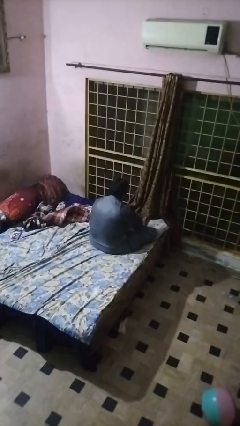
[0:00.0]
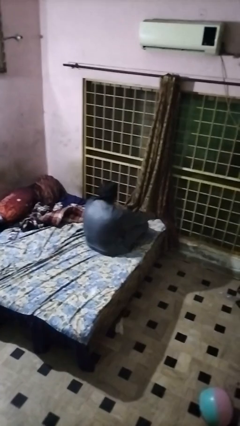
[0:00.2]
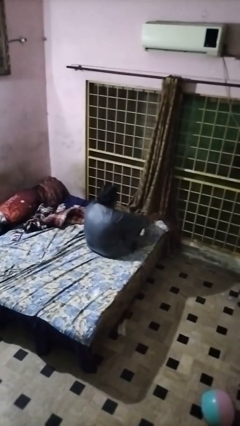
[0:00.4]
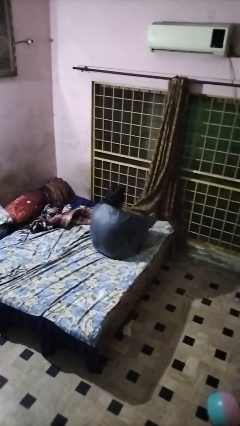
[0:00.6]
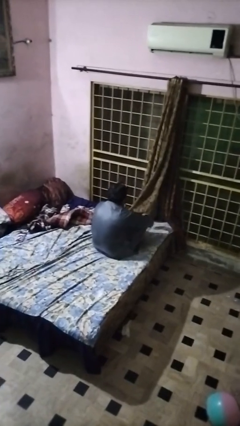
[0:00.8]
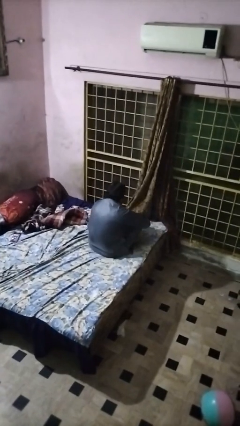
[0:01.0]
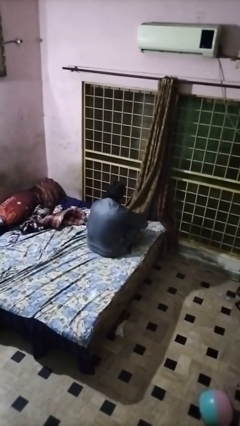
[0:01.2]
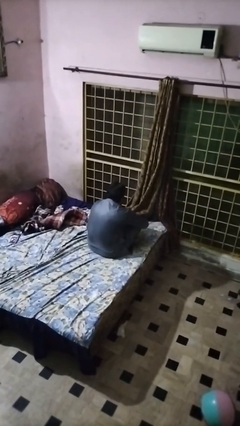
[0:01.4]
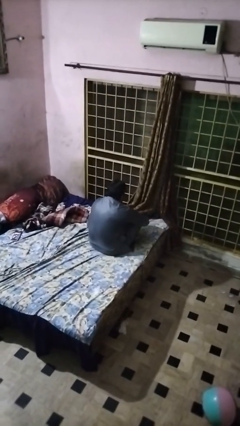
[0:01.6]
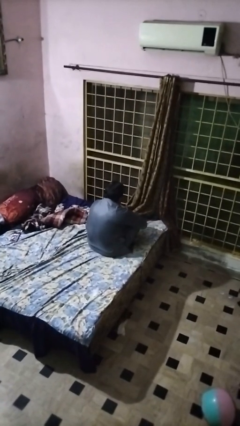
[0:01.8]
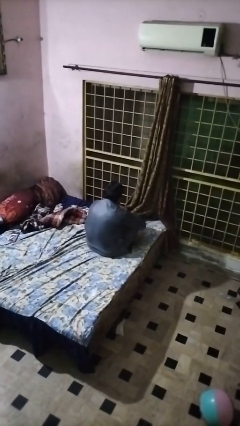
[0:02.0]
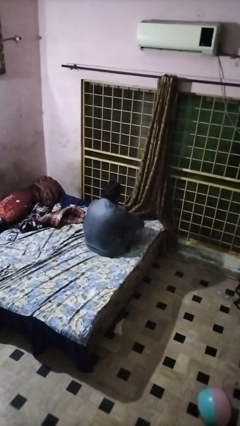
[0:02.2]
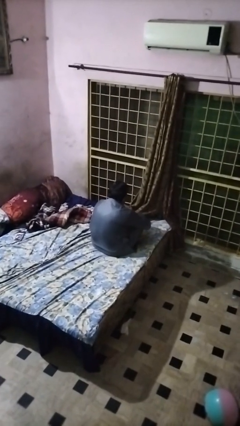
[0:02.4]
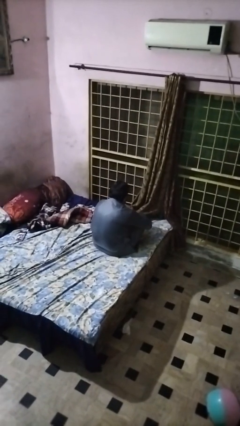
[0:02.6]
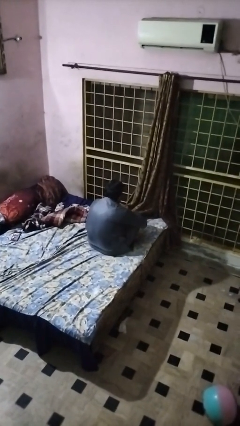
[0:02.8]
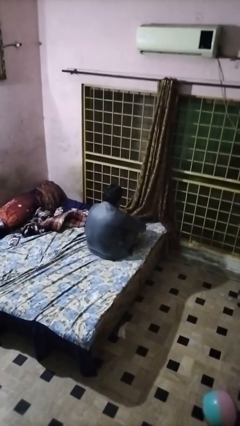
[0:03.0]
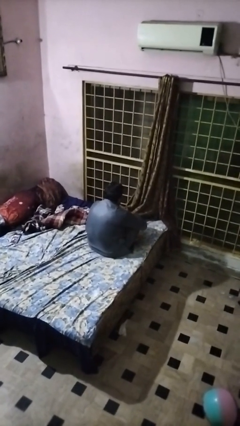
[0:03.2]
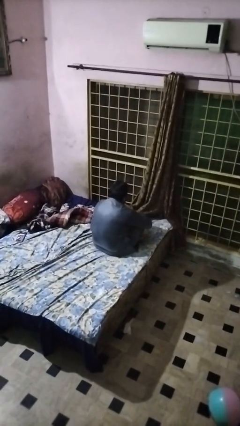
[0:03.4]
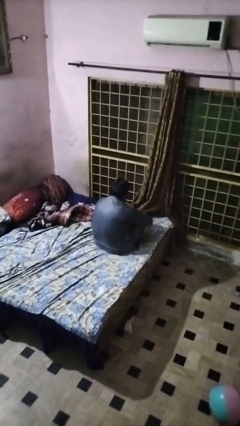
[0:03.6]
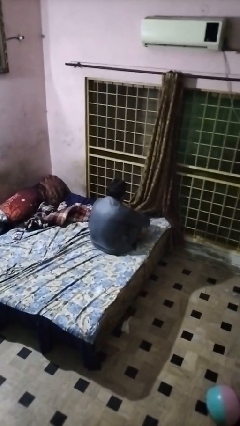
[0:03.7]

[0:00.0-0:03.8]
person crosses legs

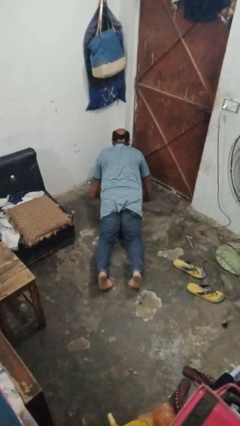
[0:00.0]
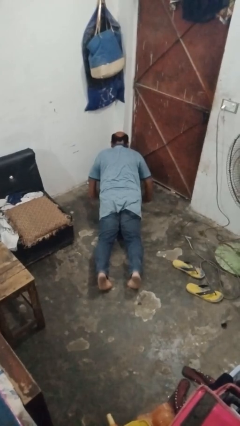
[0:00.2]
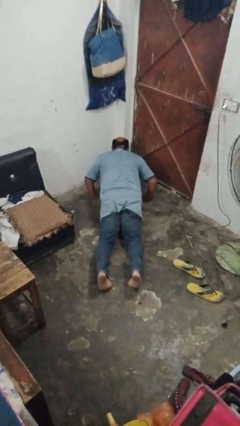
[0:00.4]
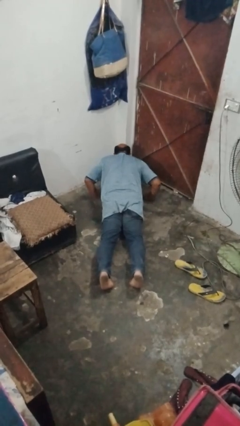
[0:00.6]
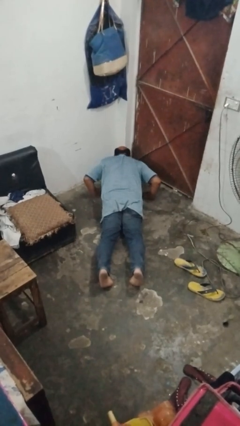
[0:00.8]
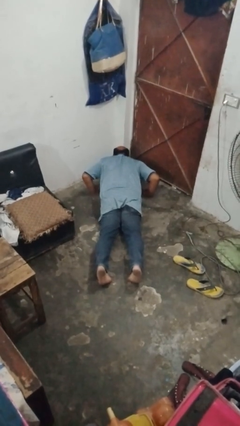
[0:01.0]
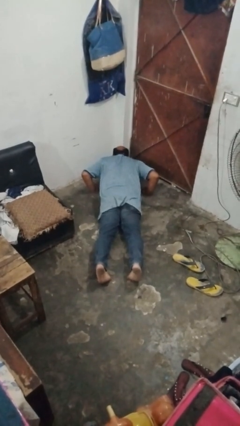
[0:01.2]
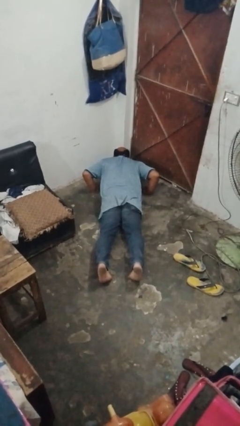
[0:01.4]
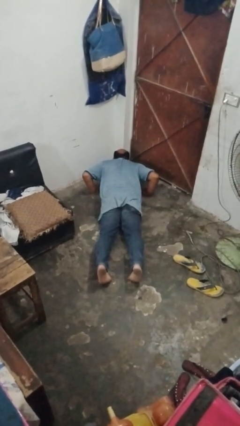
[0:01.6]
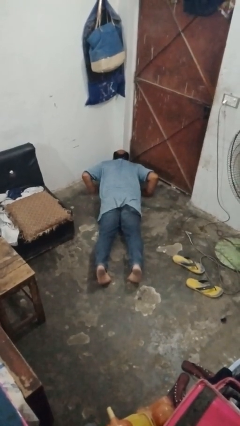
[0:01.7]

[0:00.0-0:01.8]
person exercises with pushup

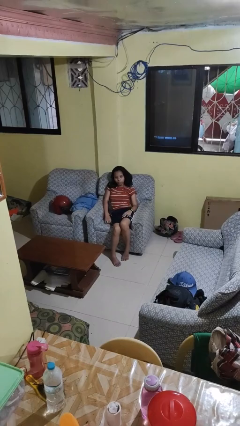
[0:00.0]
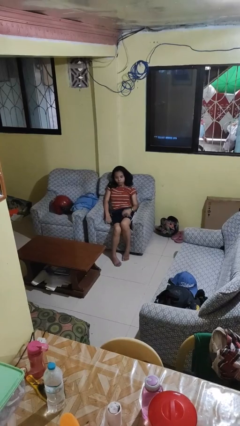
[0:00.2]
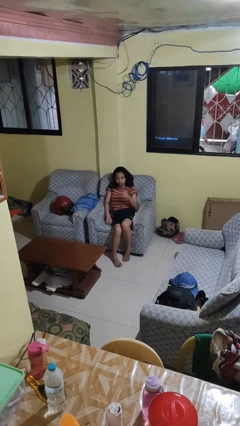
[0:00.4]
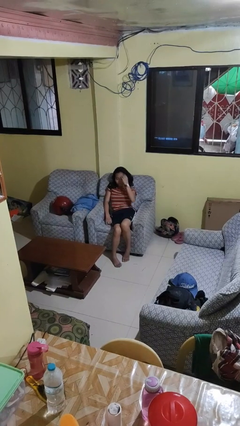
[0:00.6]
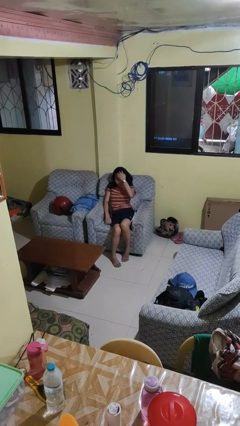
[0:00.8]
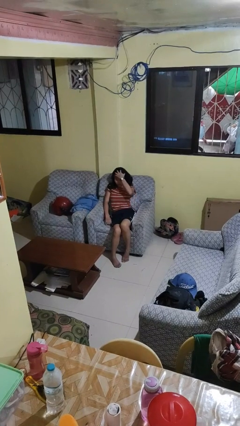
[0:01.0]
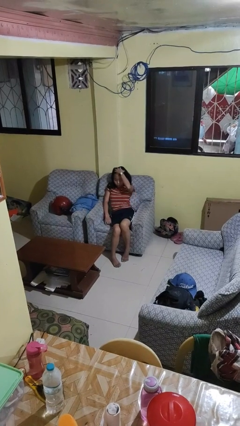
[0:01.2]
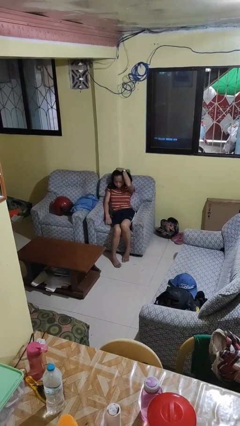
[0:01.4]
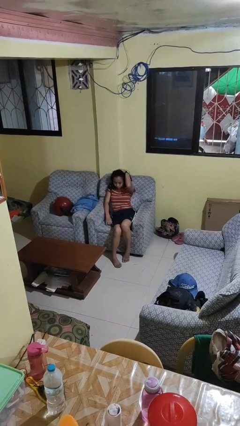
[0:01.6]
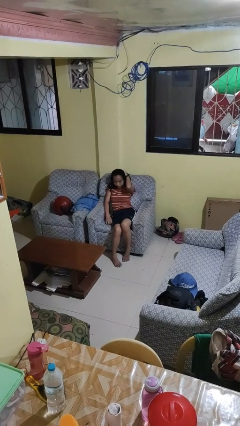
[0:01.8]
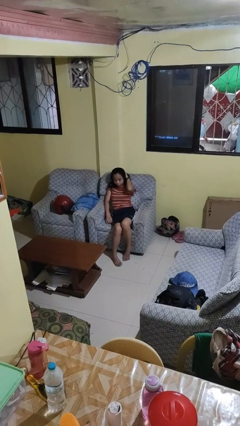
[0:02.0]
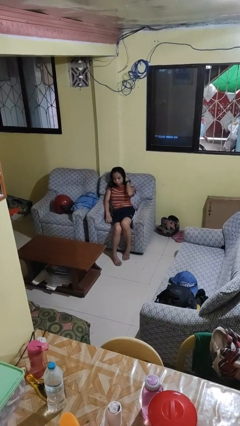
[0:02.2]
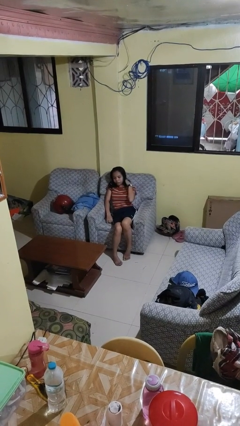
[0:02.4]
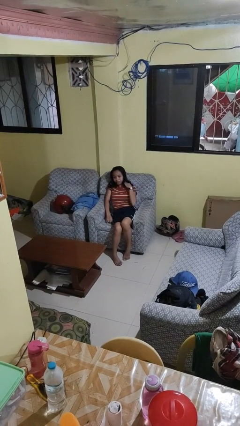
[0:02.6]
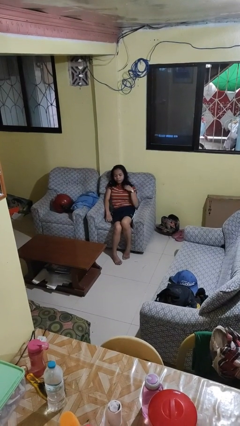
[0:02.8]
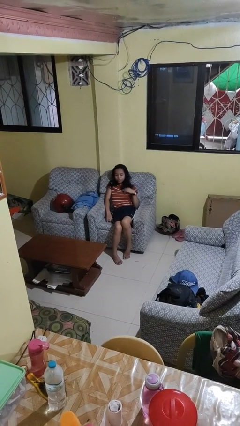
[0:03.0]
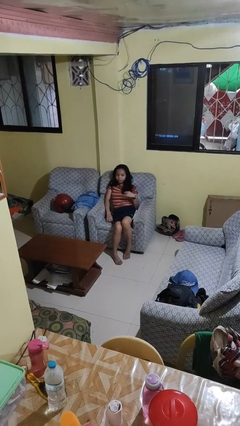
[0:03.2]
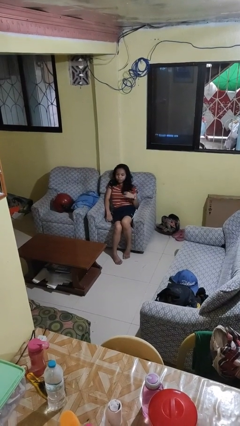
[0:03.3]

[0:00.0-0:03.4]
person strokes hair

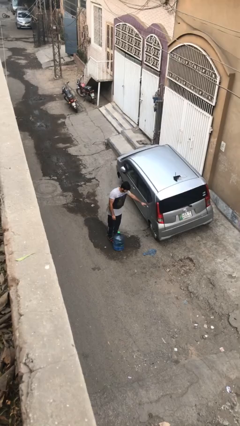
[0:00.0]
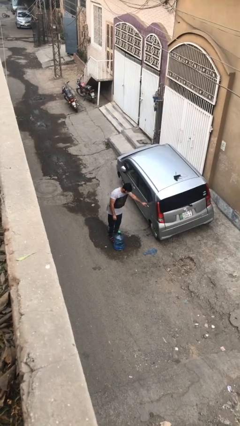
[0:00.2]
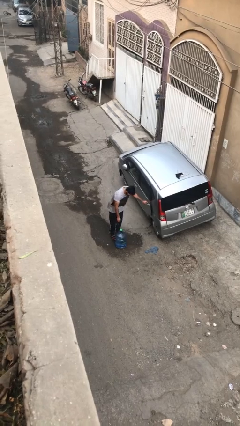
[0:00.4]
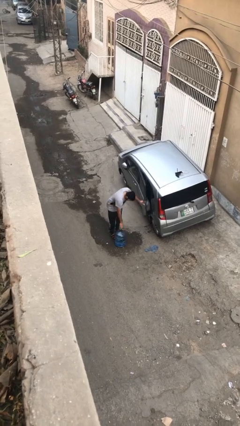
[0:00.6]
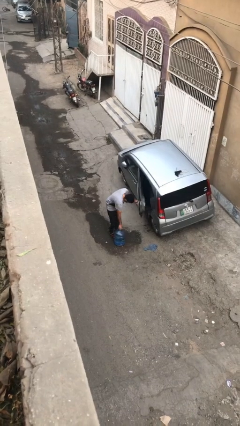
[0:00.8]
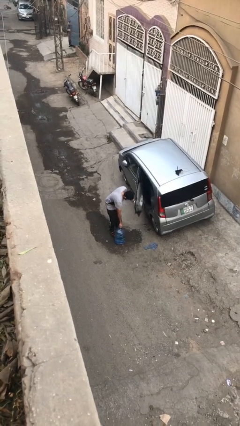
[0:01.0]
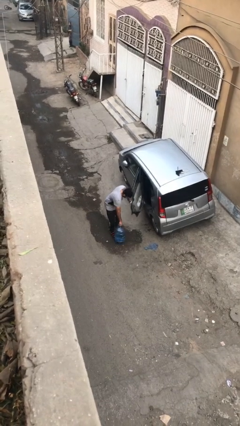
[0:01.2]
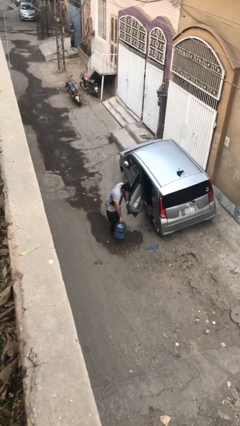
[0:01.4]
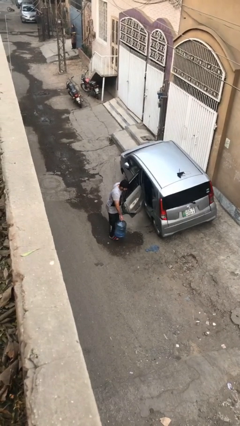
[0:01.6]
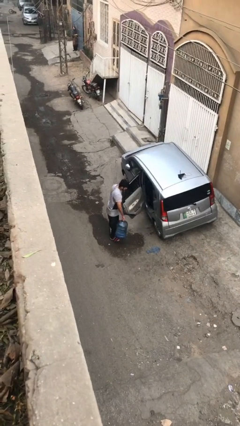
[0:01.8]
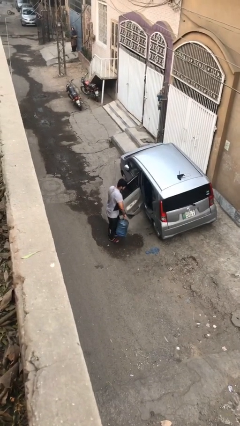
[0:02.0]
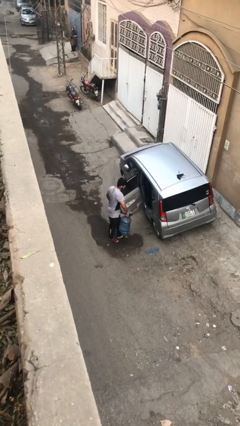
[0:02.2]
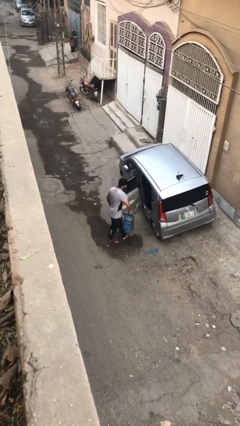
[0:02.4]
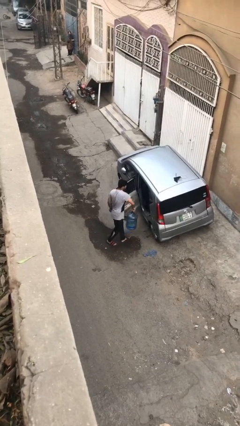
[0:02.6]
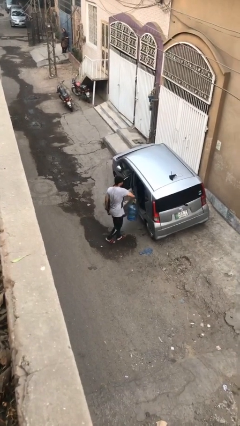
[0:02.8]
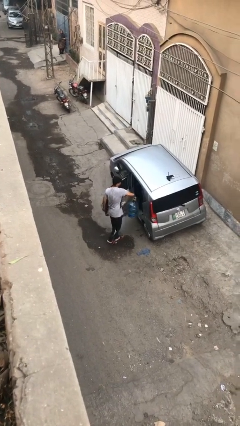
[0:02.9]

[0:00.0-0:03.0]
person opens car door

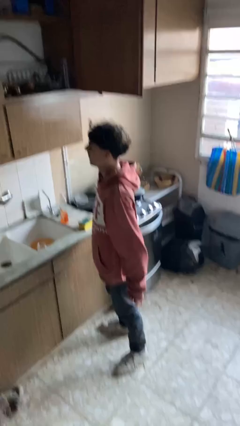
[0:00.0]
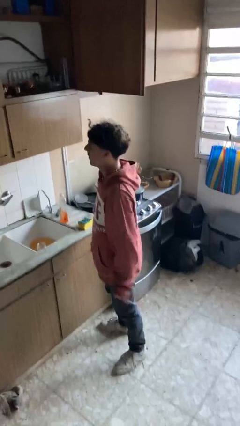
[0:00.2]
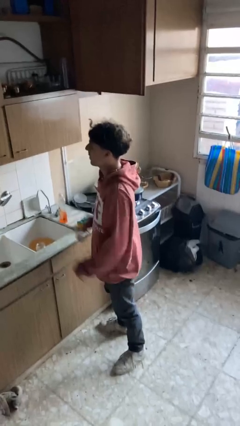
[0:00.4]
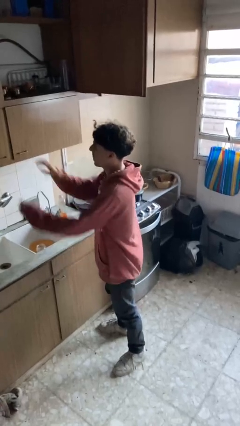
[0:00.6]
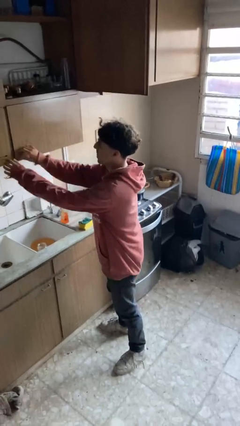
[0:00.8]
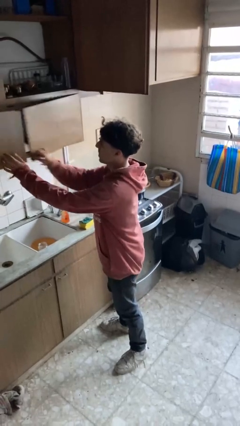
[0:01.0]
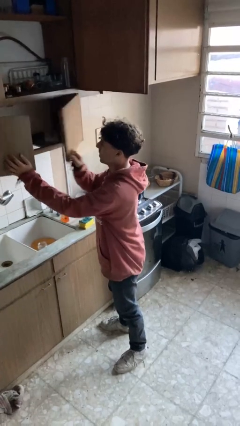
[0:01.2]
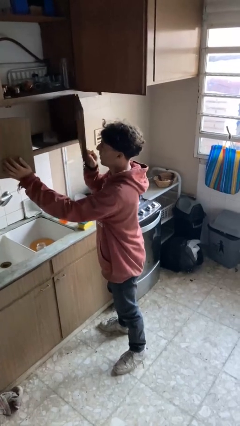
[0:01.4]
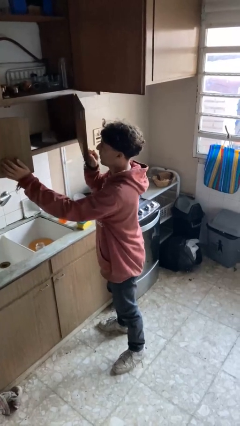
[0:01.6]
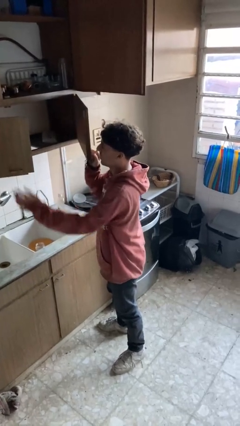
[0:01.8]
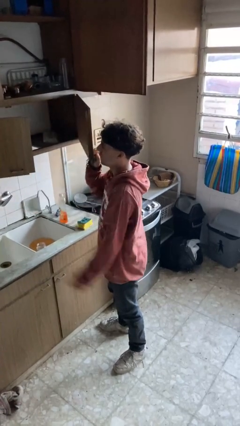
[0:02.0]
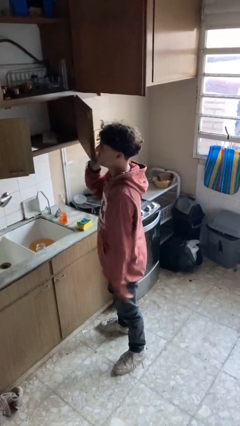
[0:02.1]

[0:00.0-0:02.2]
person opens cabinet

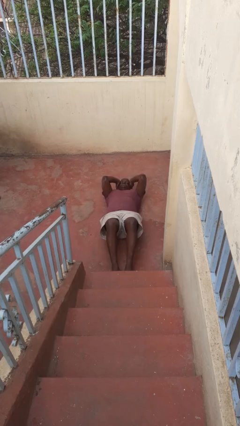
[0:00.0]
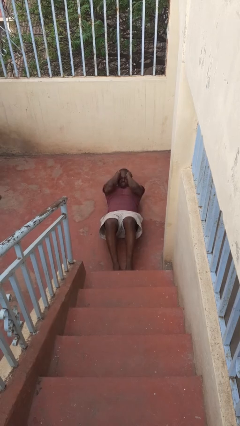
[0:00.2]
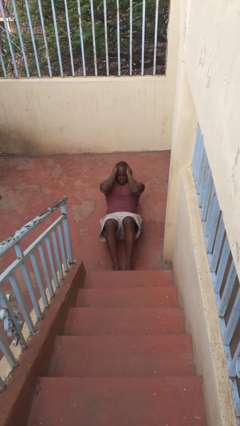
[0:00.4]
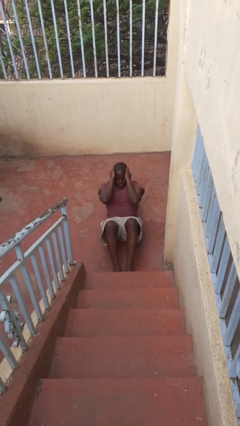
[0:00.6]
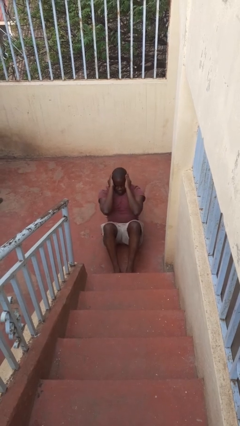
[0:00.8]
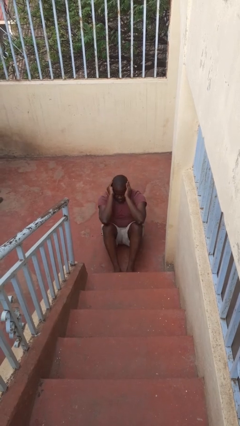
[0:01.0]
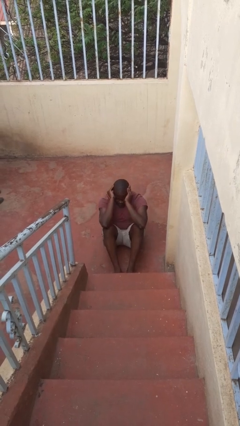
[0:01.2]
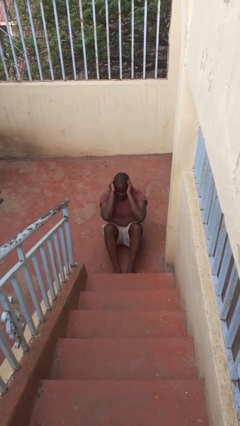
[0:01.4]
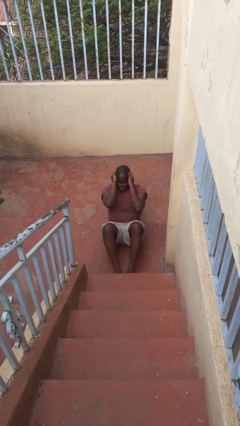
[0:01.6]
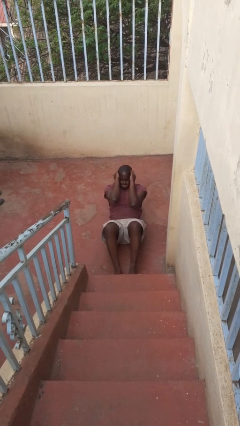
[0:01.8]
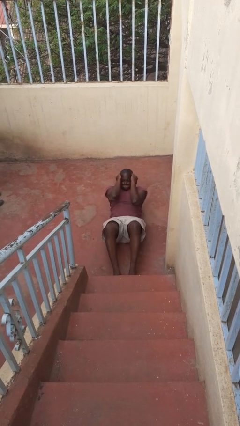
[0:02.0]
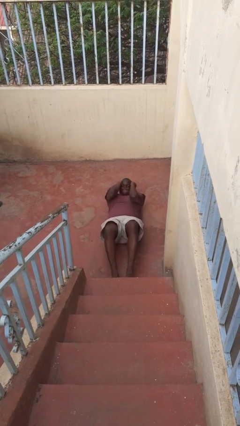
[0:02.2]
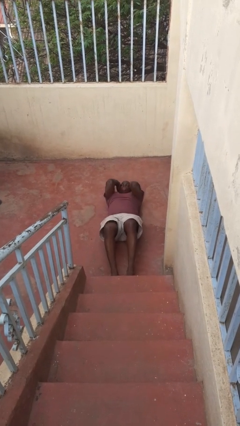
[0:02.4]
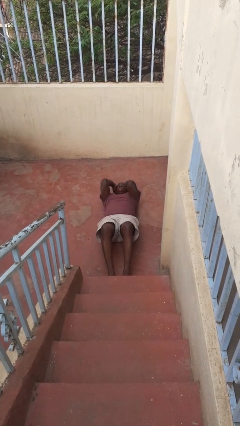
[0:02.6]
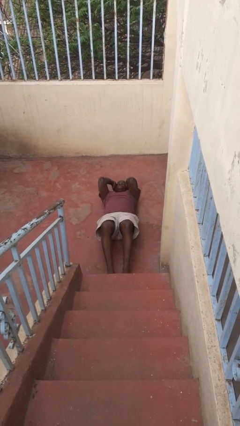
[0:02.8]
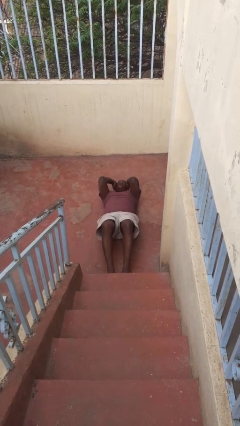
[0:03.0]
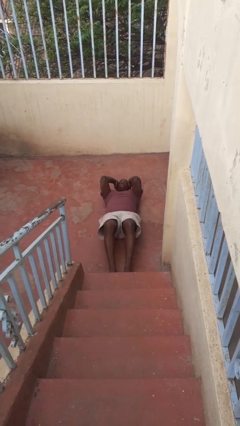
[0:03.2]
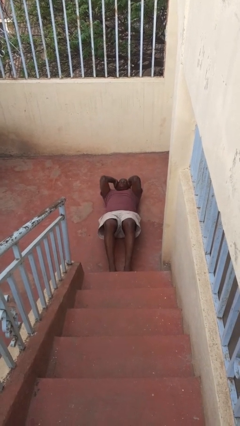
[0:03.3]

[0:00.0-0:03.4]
person exercises with situp
